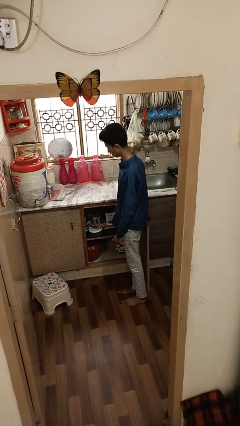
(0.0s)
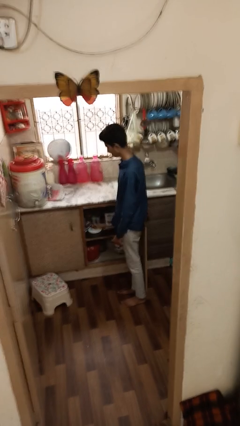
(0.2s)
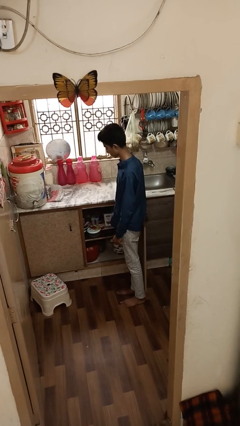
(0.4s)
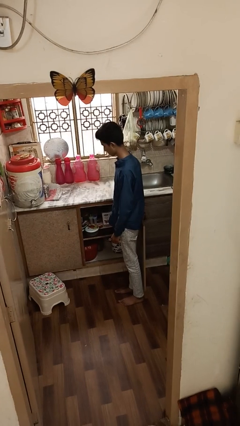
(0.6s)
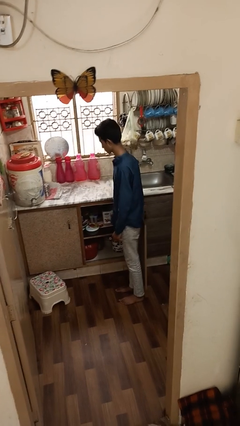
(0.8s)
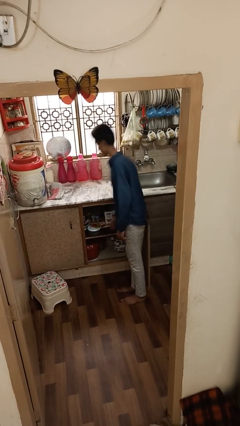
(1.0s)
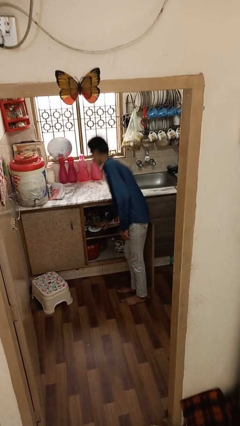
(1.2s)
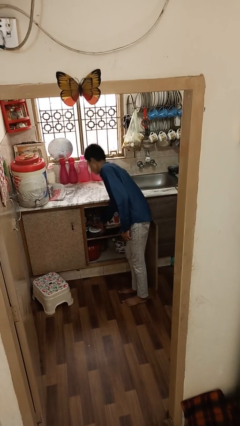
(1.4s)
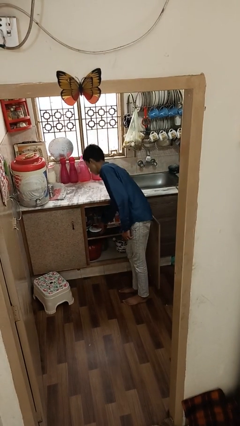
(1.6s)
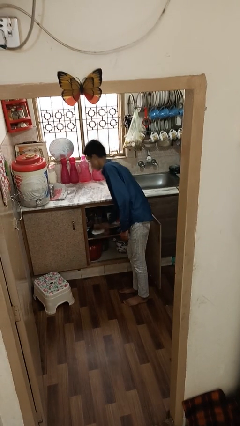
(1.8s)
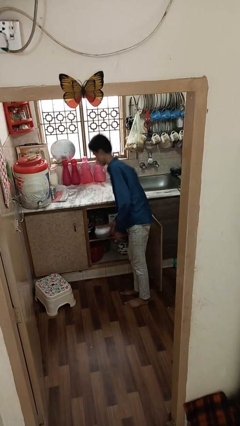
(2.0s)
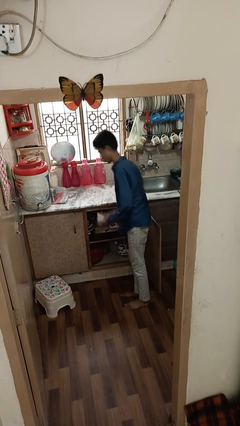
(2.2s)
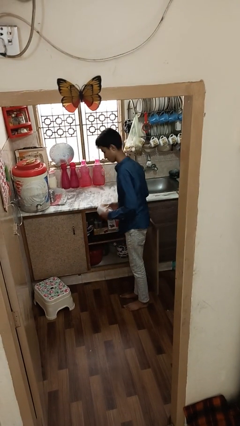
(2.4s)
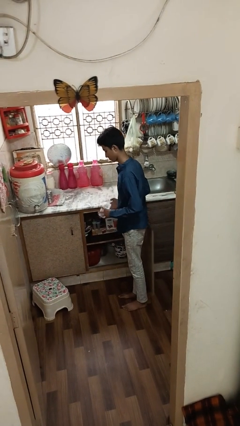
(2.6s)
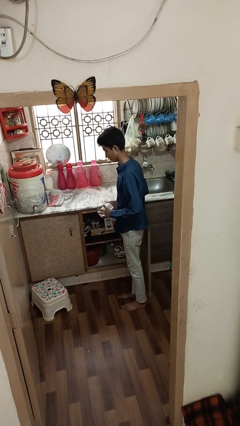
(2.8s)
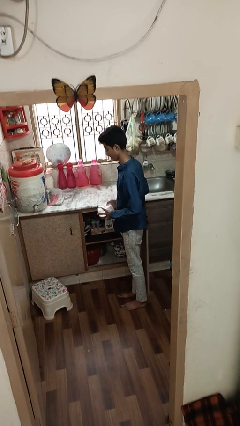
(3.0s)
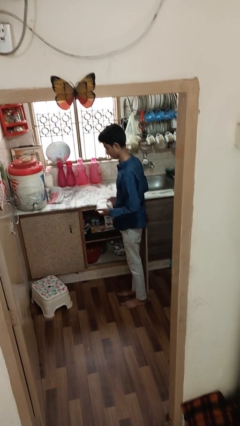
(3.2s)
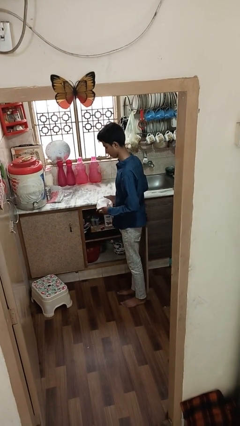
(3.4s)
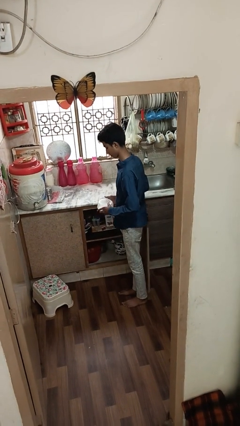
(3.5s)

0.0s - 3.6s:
person picks up object from cabinet

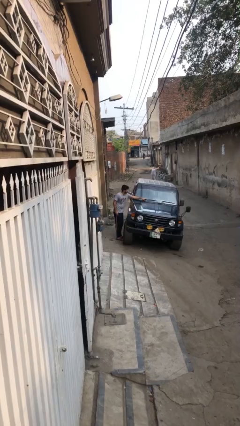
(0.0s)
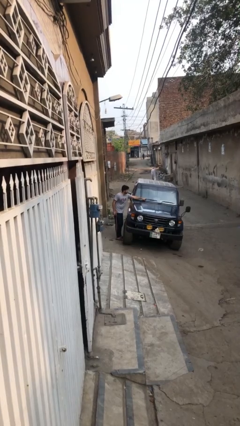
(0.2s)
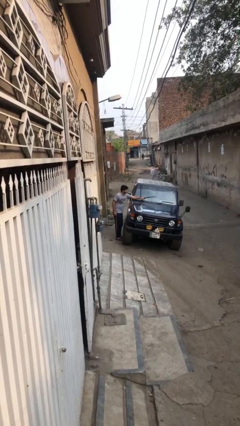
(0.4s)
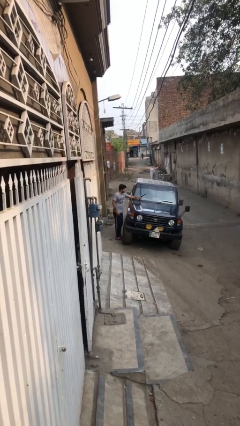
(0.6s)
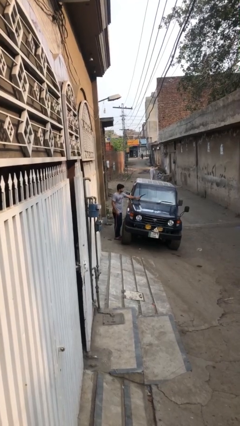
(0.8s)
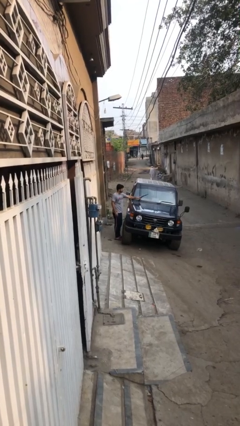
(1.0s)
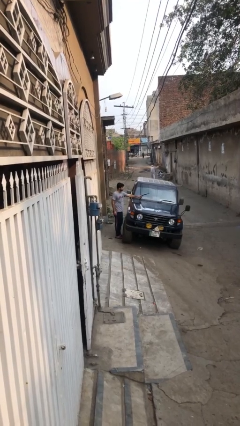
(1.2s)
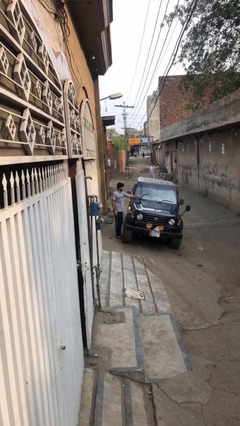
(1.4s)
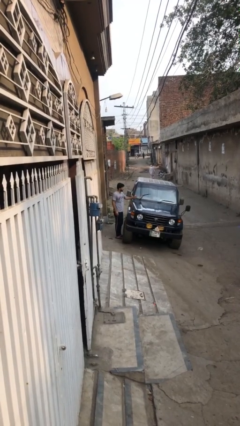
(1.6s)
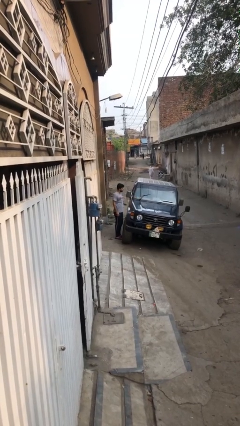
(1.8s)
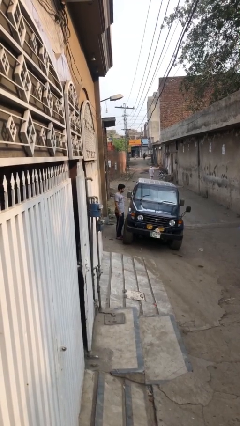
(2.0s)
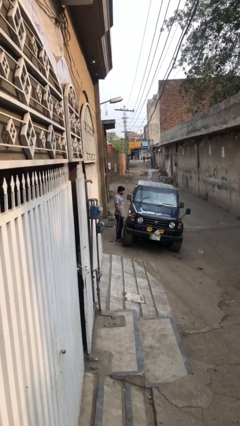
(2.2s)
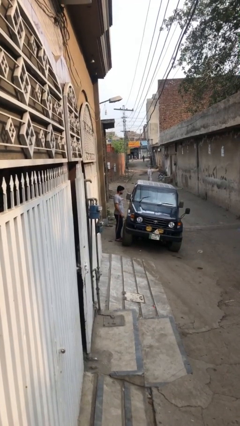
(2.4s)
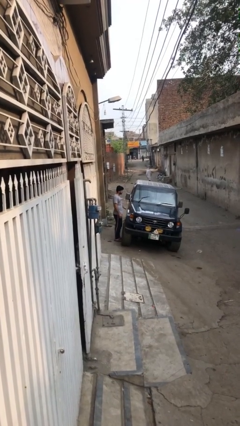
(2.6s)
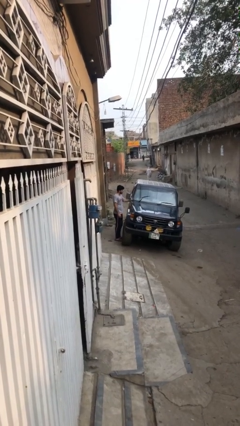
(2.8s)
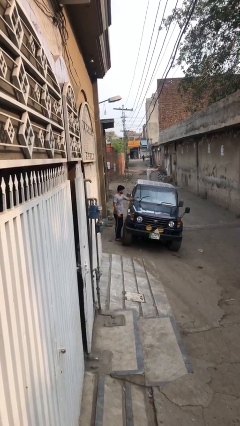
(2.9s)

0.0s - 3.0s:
person flips up car wipers

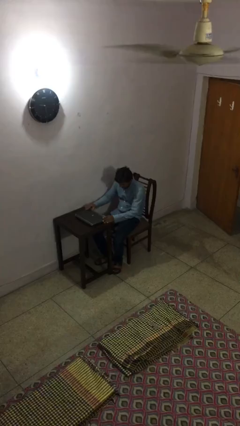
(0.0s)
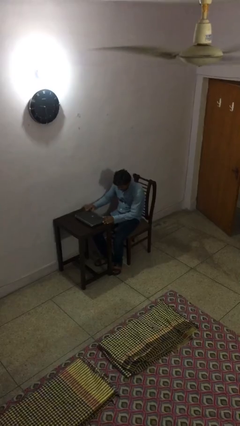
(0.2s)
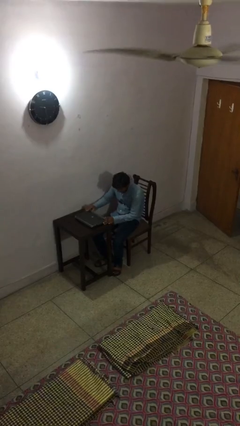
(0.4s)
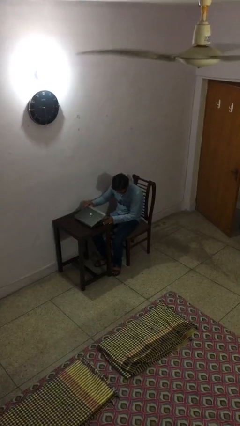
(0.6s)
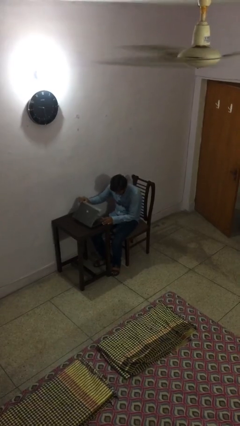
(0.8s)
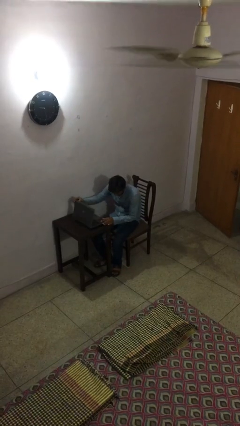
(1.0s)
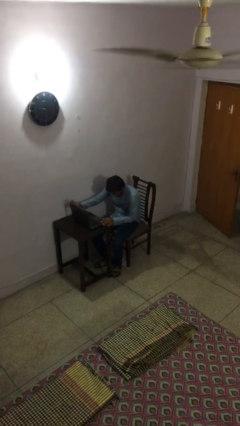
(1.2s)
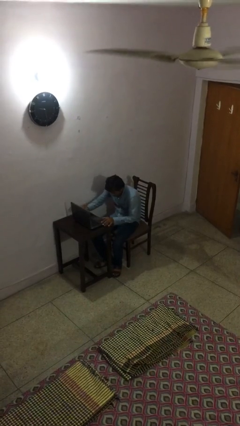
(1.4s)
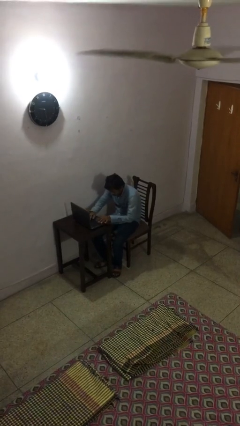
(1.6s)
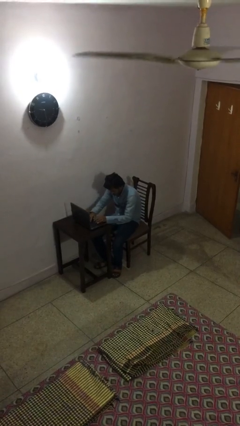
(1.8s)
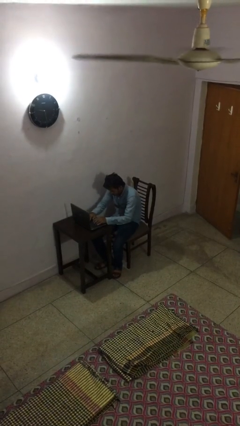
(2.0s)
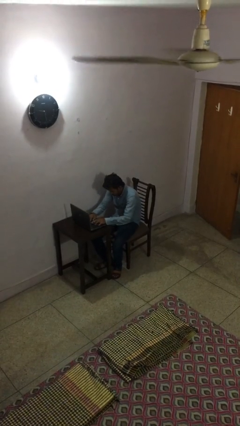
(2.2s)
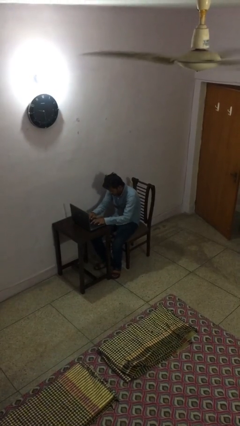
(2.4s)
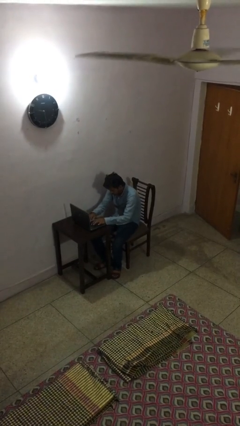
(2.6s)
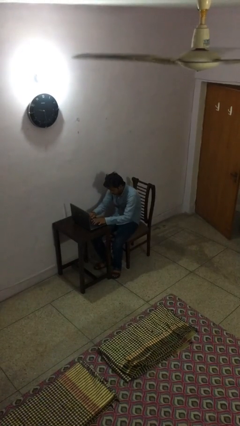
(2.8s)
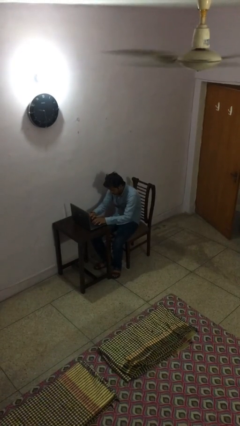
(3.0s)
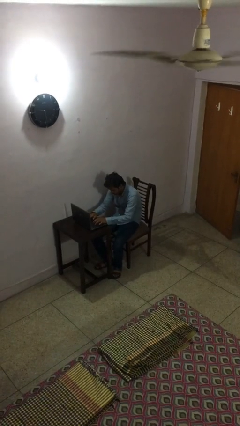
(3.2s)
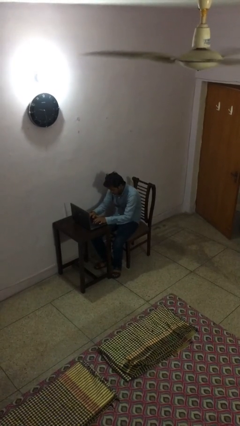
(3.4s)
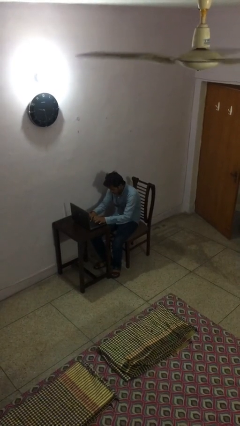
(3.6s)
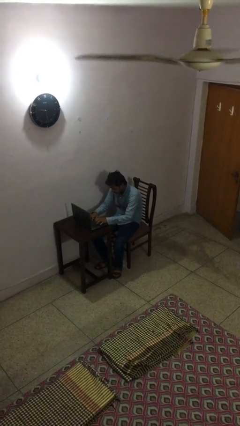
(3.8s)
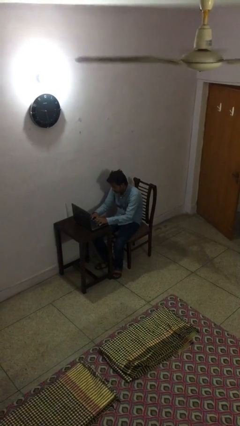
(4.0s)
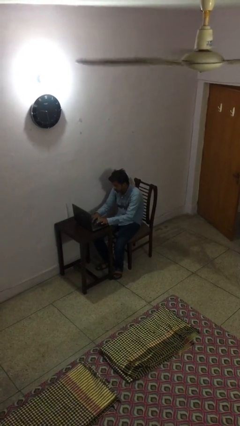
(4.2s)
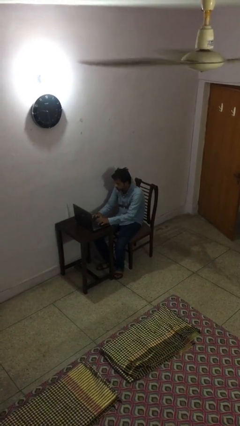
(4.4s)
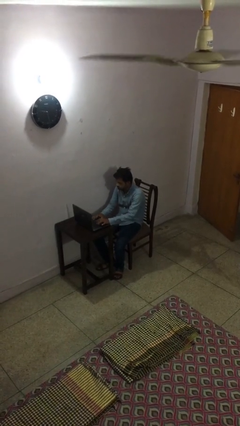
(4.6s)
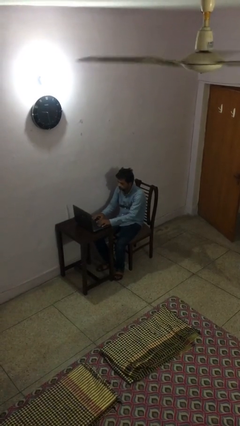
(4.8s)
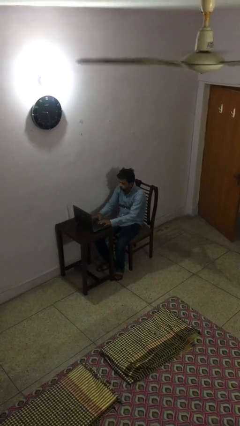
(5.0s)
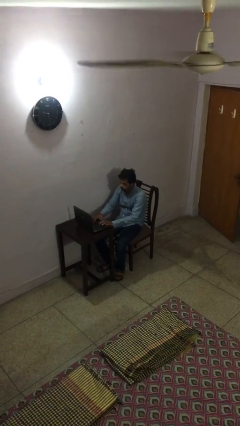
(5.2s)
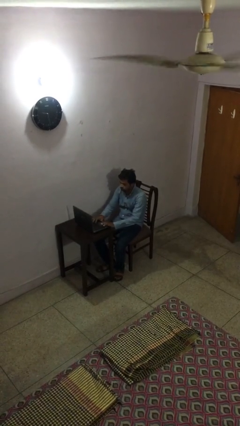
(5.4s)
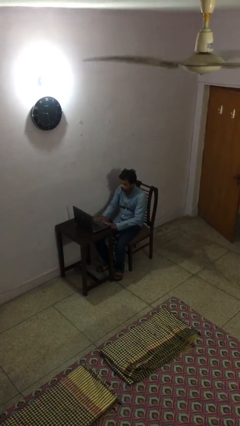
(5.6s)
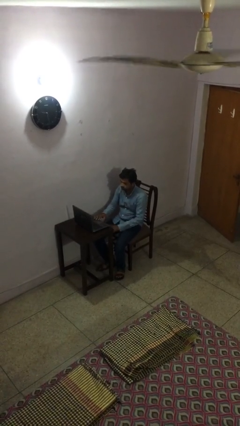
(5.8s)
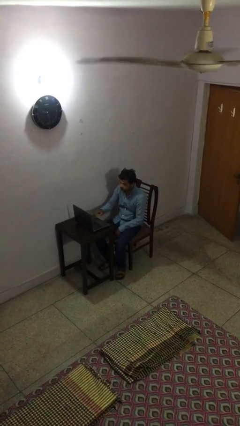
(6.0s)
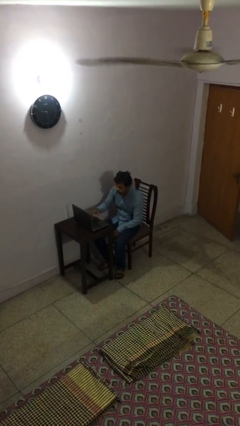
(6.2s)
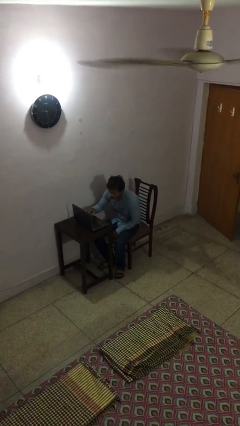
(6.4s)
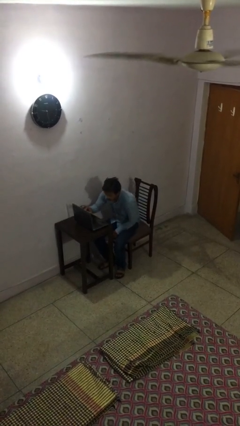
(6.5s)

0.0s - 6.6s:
person interacts with laptop

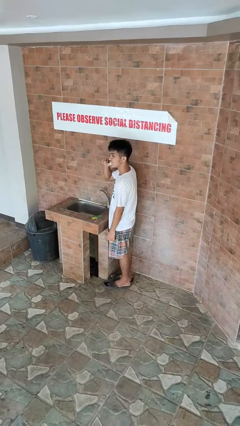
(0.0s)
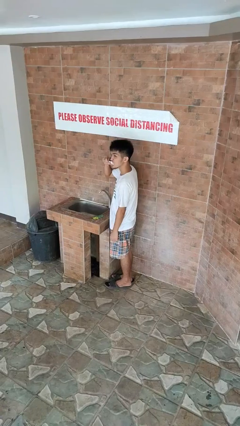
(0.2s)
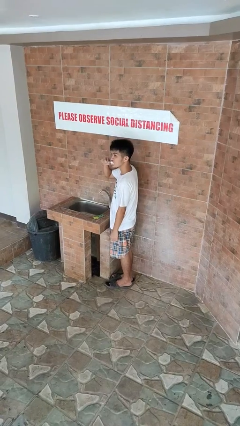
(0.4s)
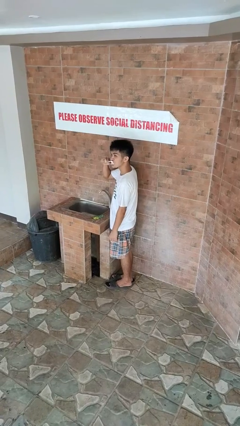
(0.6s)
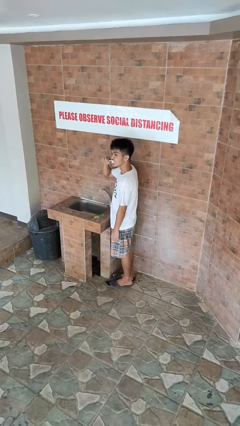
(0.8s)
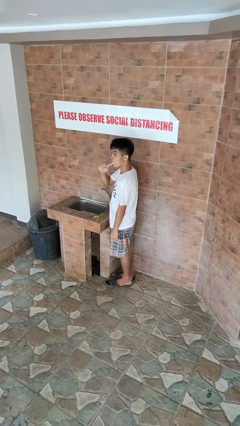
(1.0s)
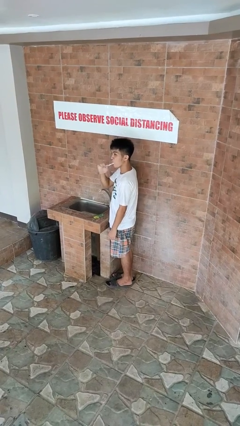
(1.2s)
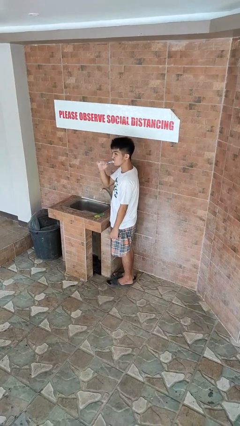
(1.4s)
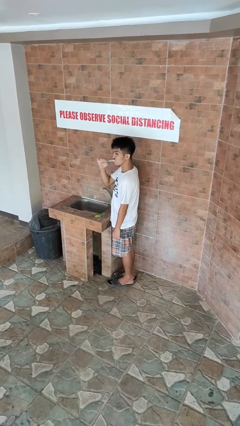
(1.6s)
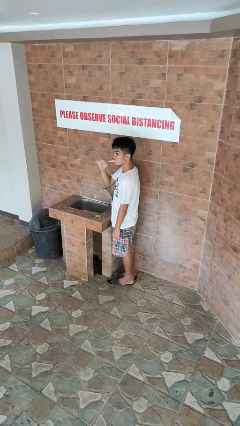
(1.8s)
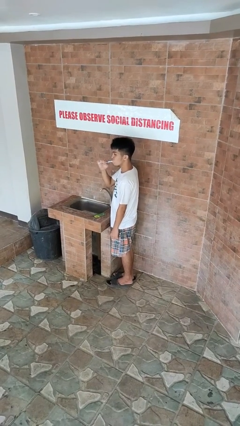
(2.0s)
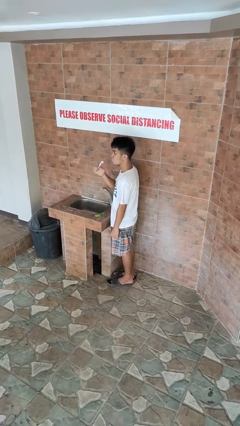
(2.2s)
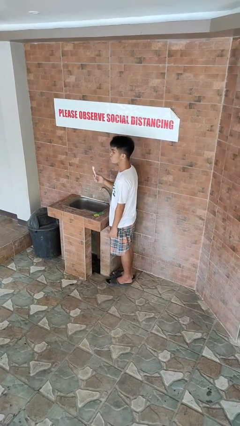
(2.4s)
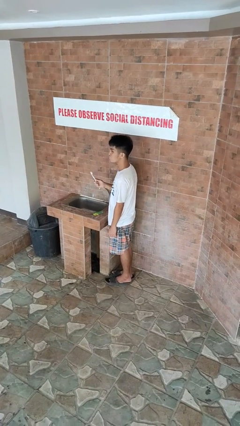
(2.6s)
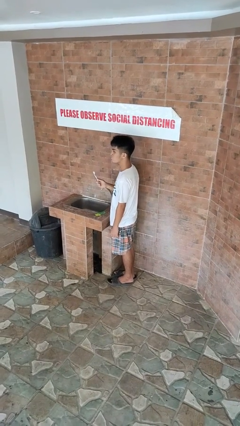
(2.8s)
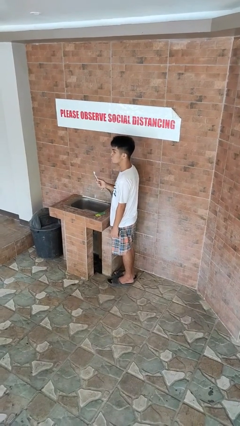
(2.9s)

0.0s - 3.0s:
person brushes teeth

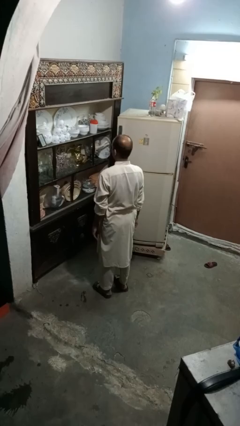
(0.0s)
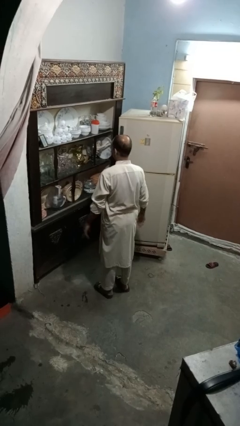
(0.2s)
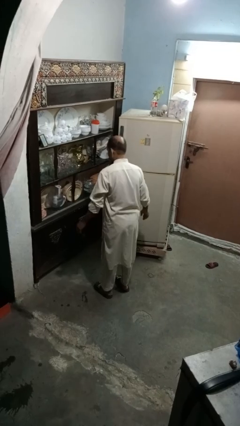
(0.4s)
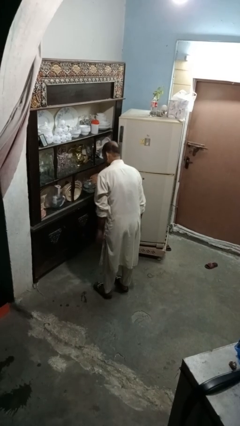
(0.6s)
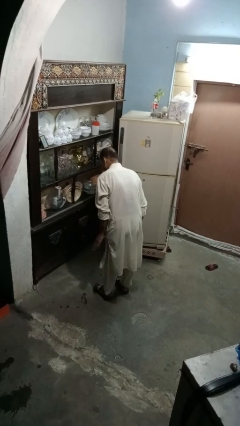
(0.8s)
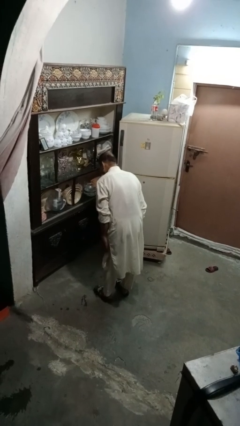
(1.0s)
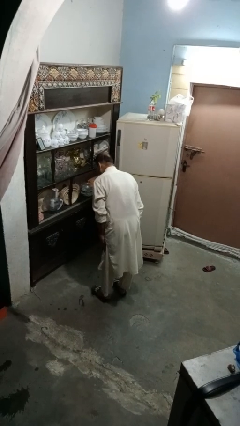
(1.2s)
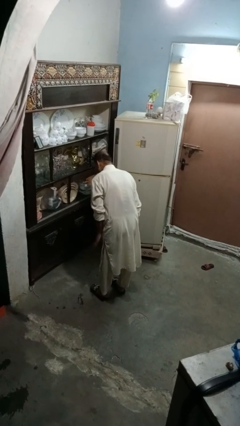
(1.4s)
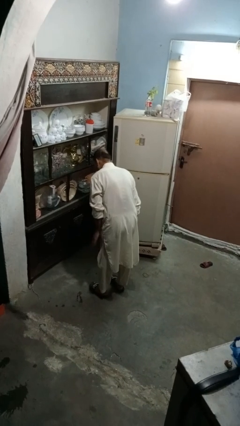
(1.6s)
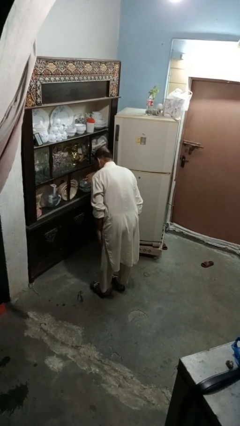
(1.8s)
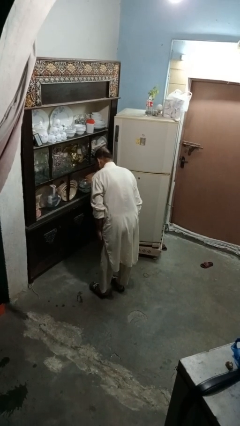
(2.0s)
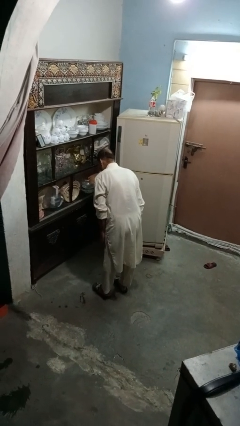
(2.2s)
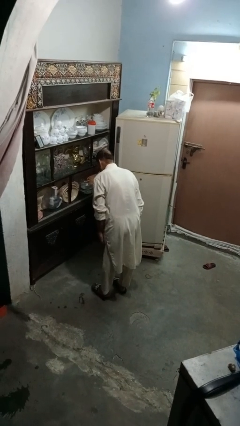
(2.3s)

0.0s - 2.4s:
person slaps hands on thighs
